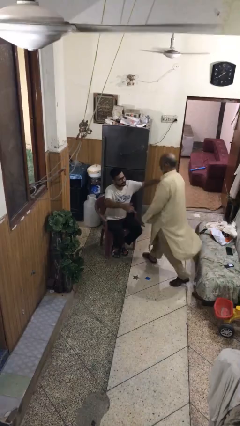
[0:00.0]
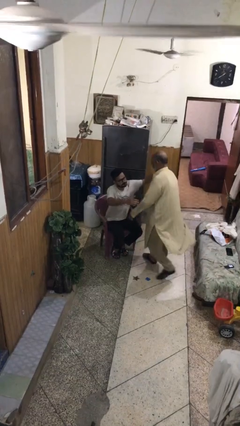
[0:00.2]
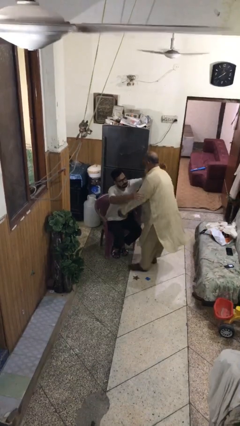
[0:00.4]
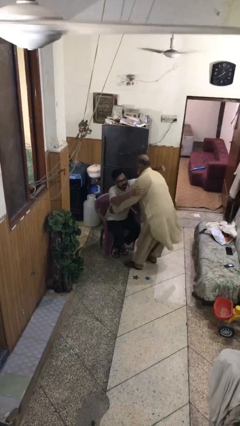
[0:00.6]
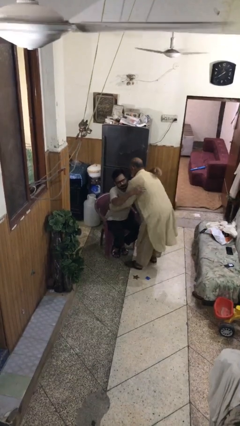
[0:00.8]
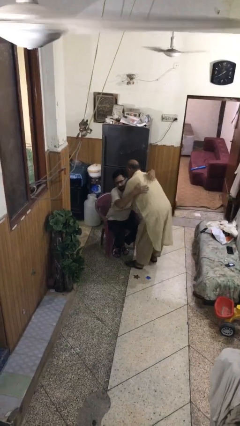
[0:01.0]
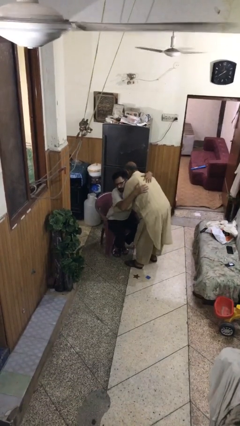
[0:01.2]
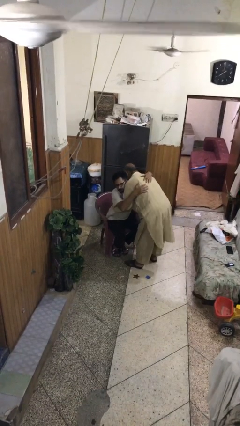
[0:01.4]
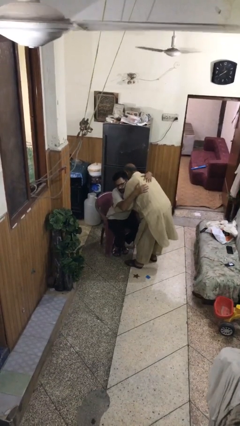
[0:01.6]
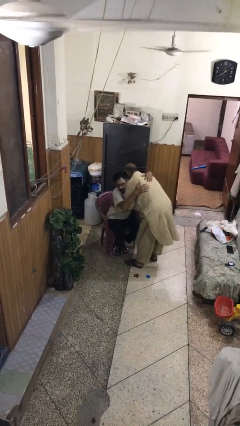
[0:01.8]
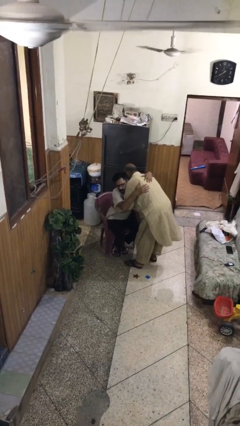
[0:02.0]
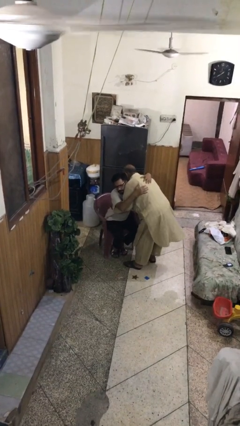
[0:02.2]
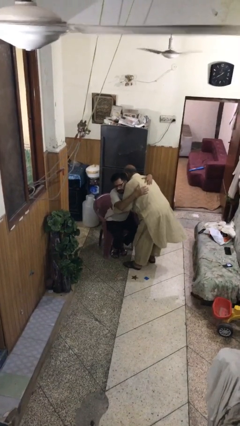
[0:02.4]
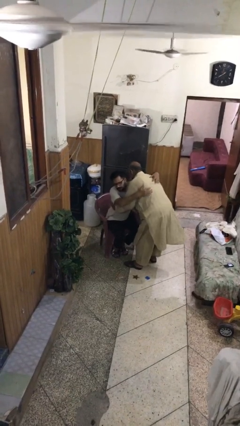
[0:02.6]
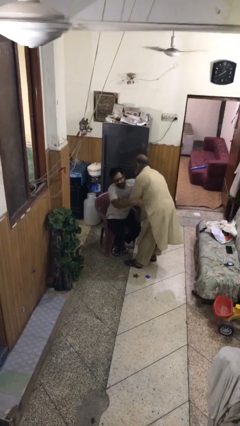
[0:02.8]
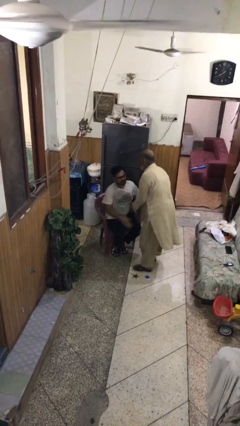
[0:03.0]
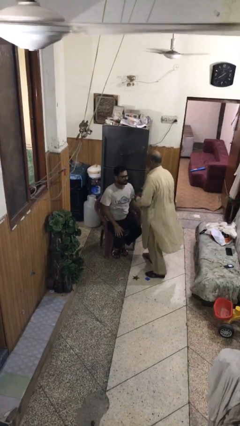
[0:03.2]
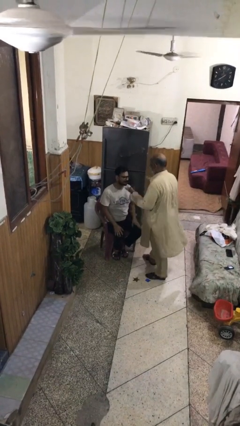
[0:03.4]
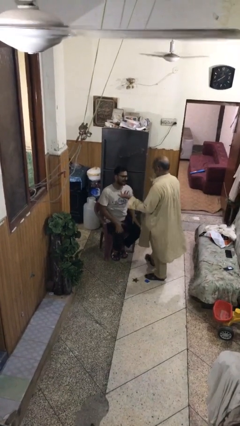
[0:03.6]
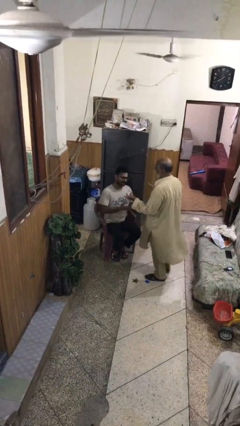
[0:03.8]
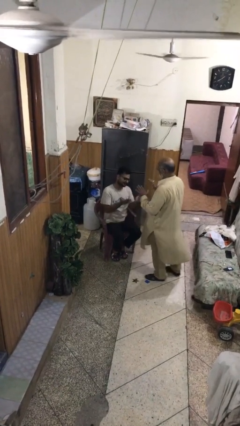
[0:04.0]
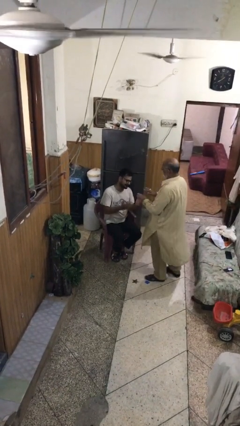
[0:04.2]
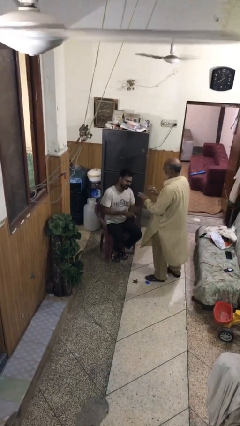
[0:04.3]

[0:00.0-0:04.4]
person embraces person

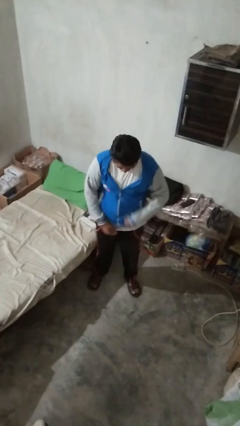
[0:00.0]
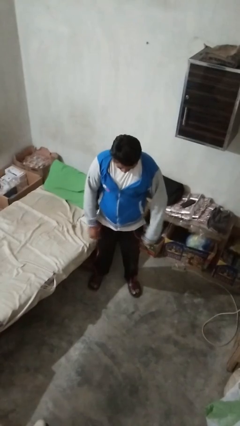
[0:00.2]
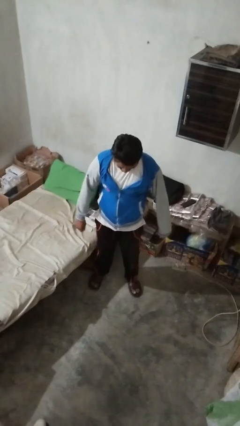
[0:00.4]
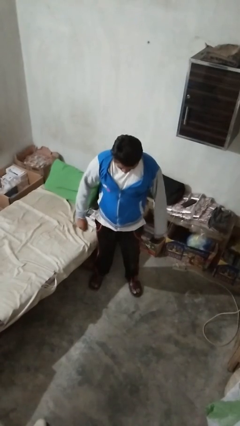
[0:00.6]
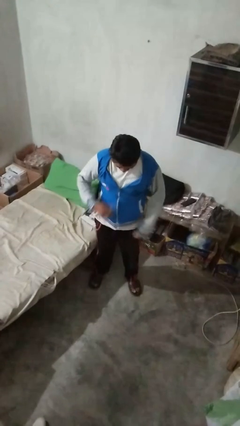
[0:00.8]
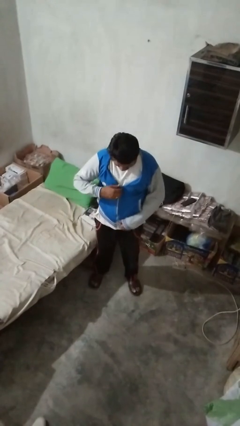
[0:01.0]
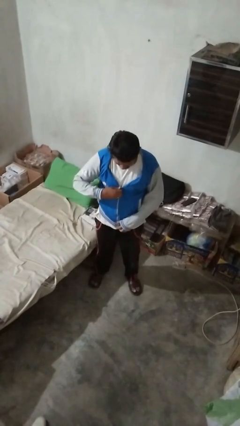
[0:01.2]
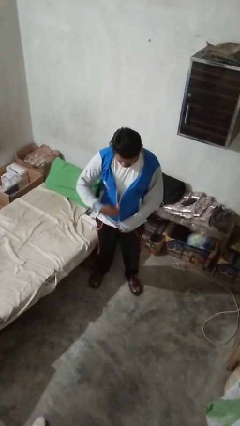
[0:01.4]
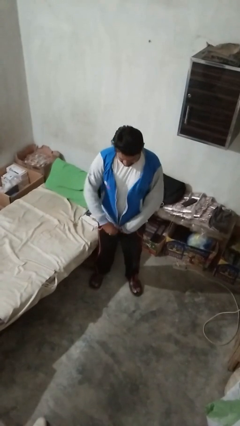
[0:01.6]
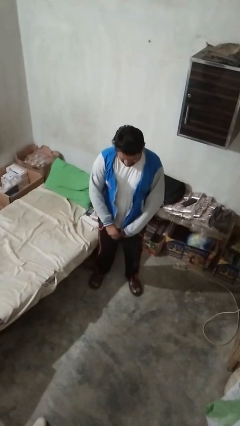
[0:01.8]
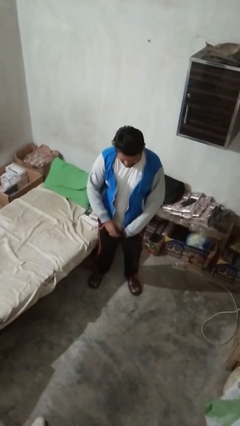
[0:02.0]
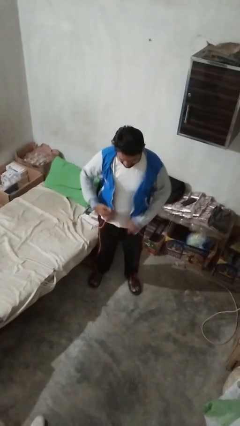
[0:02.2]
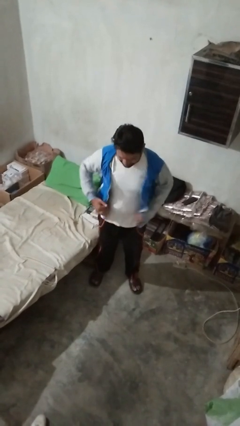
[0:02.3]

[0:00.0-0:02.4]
person unzips jacket

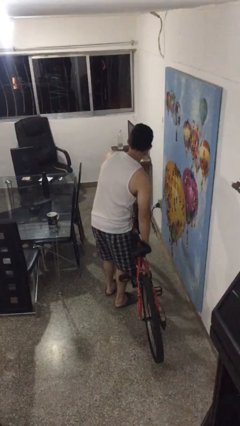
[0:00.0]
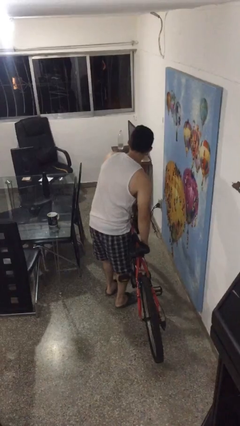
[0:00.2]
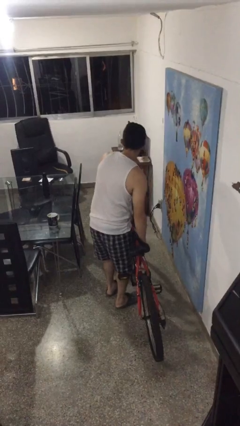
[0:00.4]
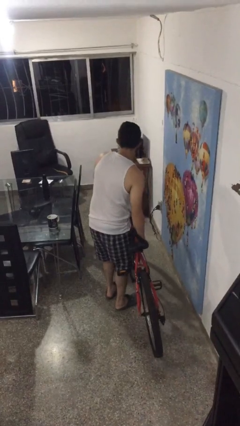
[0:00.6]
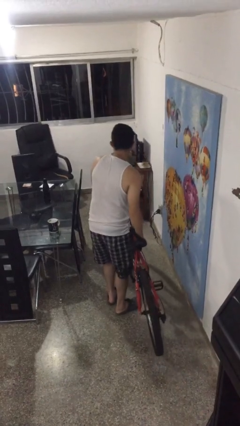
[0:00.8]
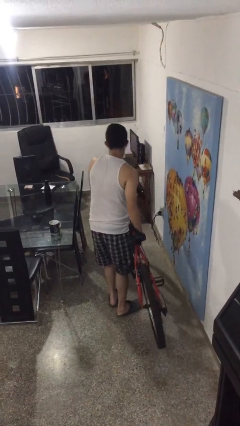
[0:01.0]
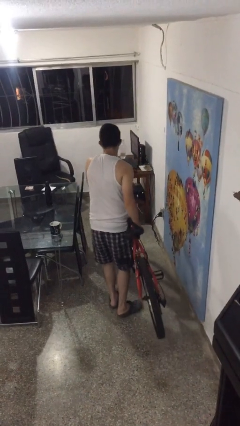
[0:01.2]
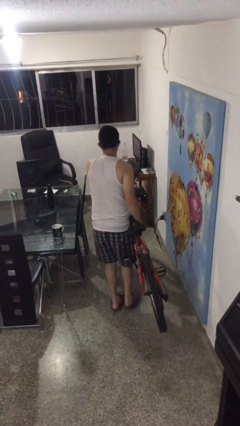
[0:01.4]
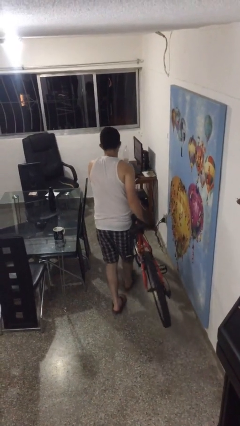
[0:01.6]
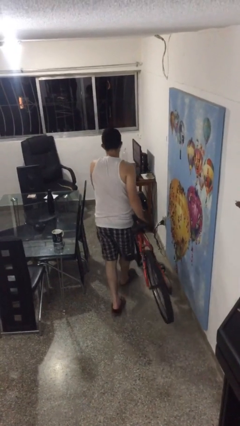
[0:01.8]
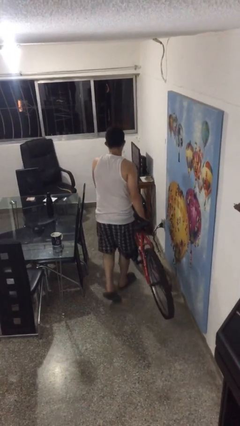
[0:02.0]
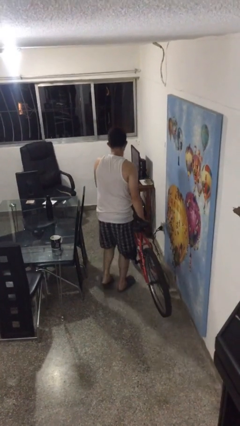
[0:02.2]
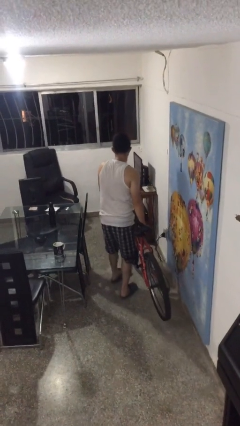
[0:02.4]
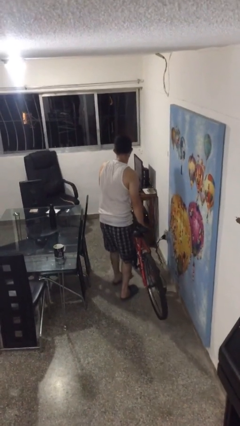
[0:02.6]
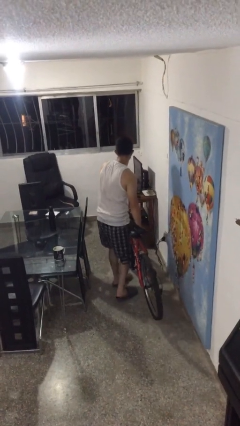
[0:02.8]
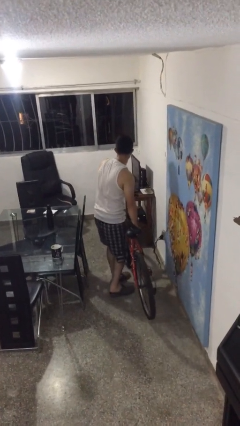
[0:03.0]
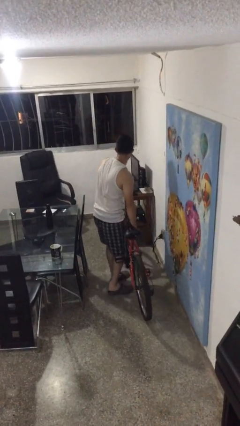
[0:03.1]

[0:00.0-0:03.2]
person carries bicycle

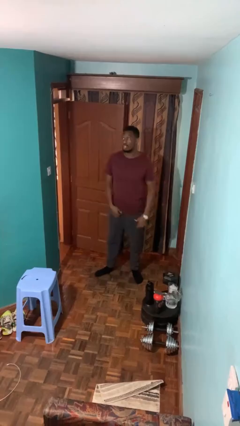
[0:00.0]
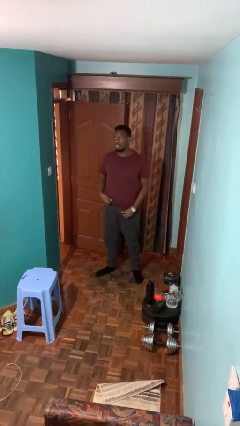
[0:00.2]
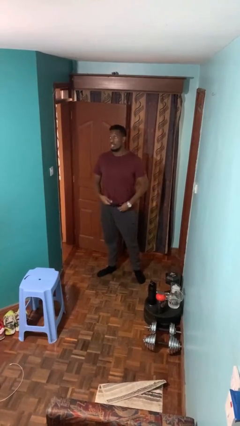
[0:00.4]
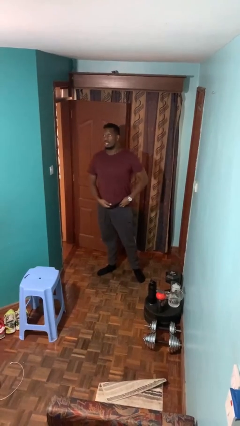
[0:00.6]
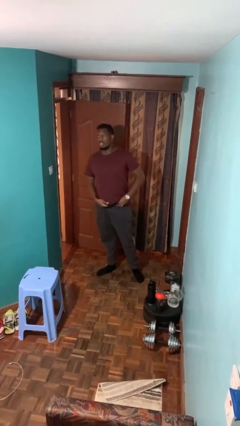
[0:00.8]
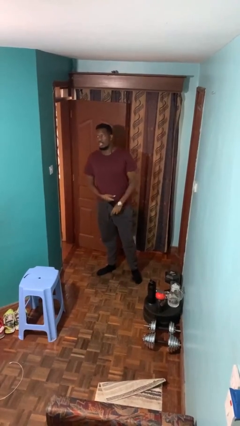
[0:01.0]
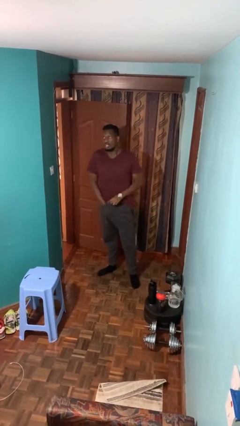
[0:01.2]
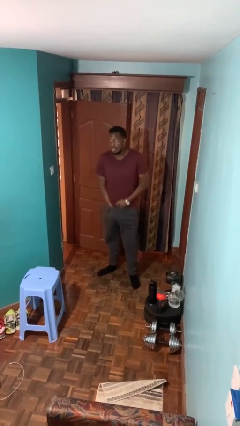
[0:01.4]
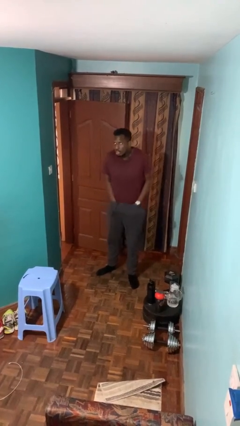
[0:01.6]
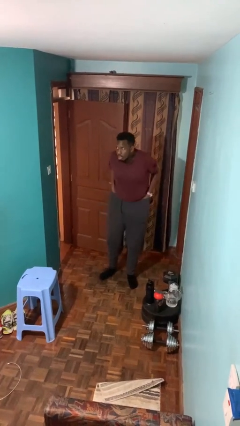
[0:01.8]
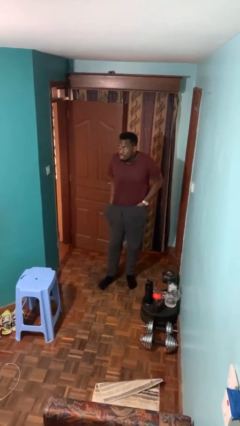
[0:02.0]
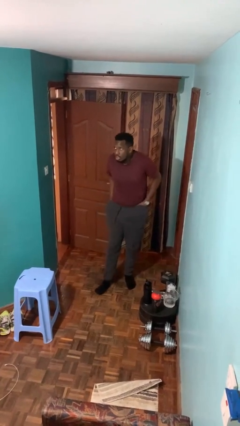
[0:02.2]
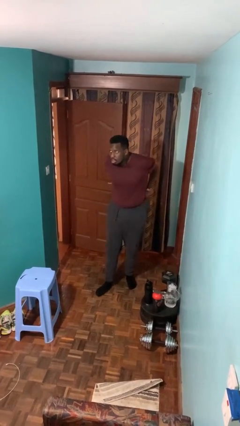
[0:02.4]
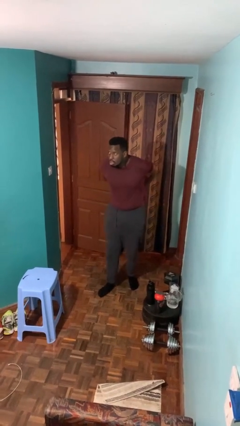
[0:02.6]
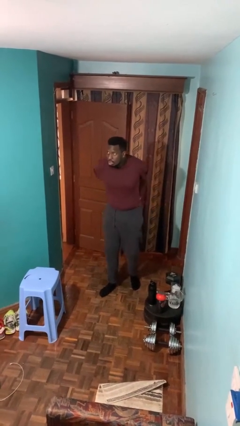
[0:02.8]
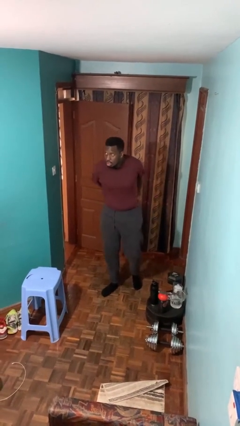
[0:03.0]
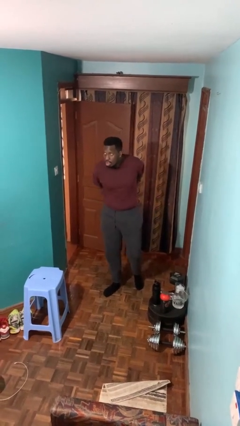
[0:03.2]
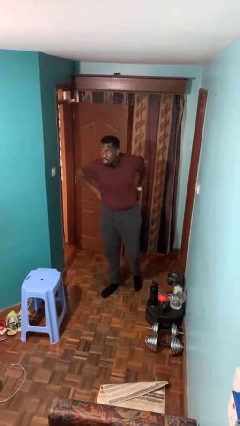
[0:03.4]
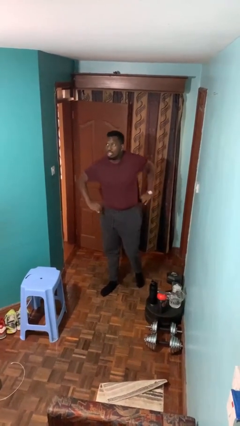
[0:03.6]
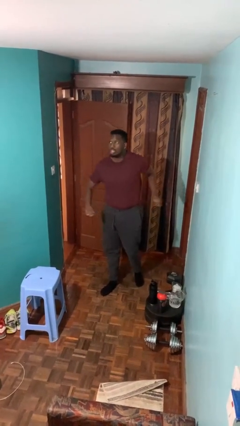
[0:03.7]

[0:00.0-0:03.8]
person tucks in shirt

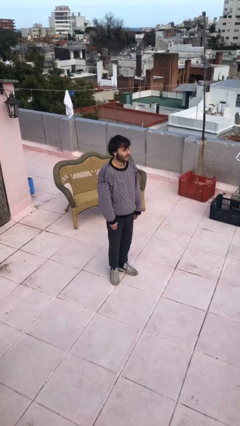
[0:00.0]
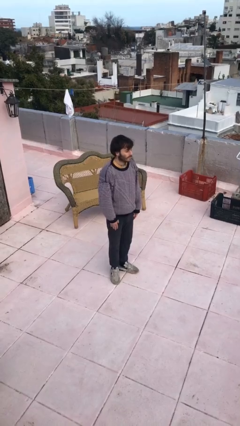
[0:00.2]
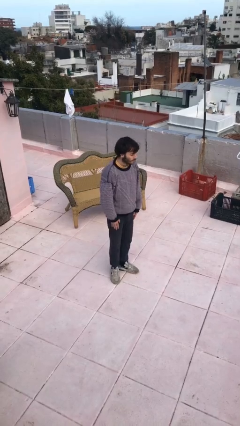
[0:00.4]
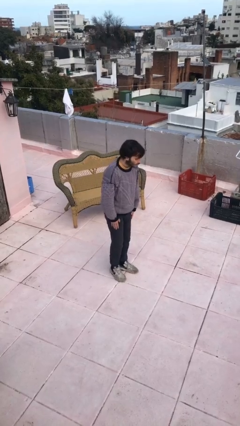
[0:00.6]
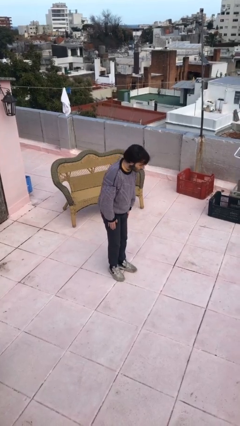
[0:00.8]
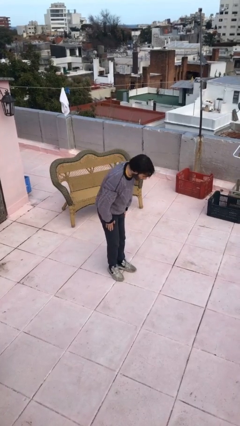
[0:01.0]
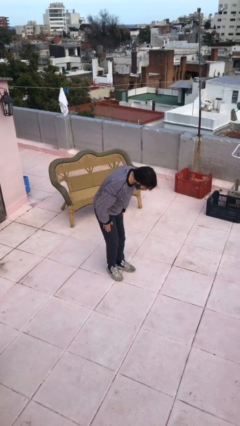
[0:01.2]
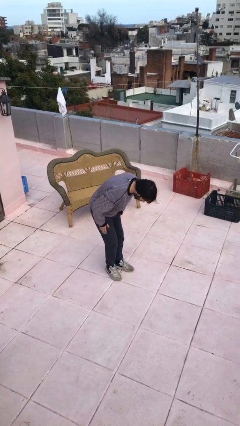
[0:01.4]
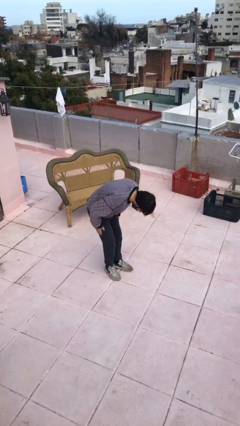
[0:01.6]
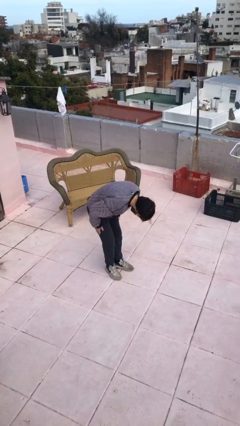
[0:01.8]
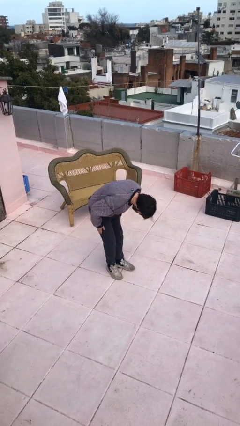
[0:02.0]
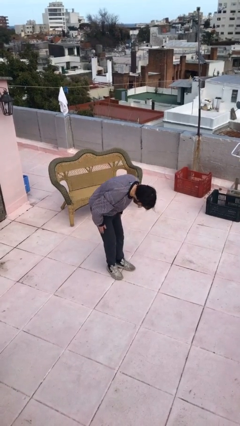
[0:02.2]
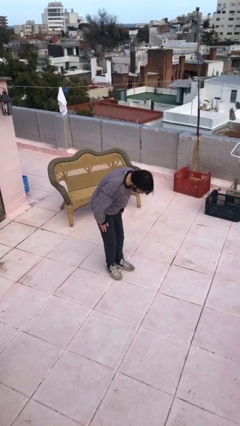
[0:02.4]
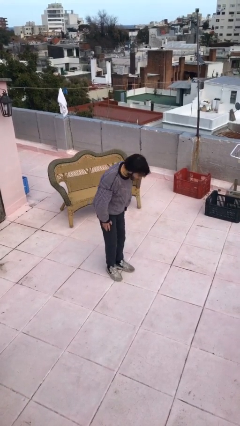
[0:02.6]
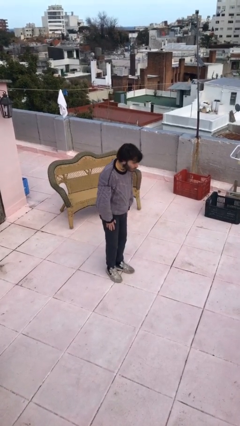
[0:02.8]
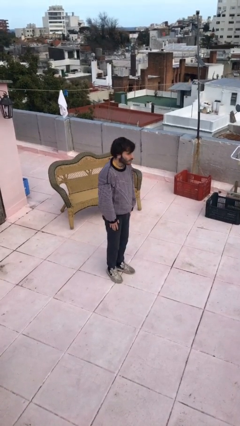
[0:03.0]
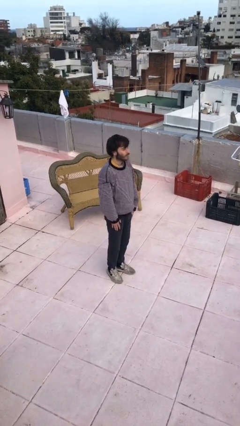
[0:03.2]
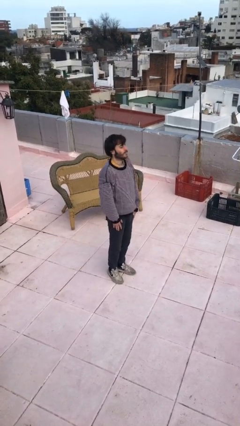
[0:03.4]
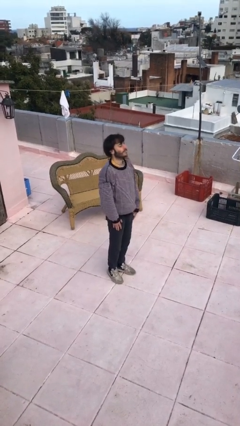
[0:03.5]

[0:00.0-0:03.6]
person bows

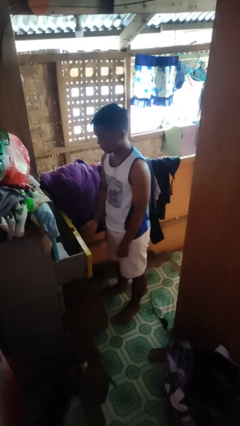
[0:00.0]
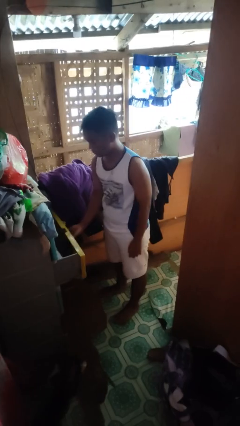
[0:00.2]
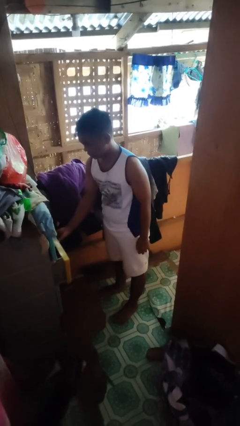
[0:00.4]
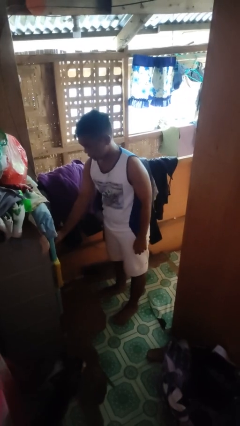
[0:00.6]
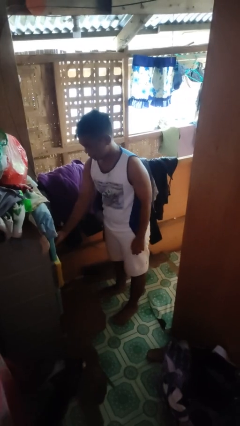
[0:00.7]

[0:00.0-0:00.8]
person closes dresser drawer
